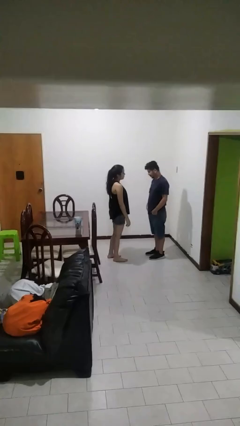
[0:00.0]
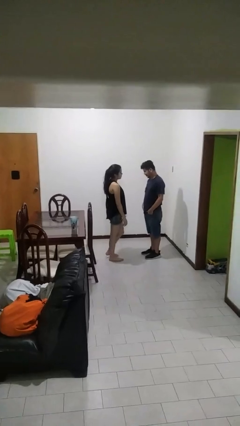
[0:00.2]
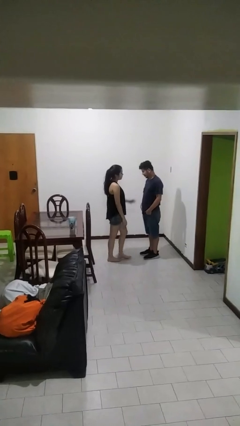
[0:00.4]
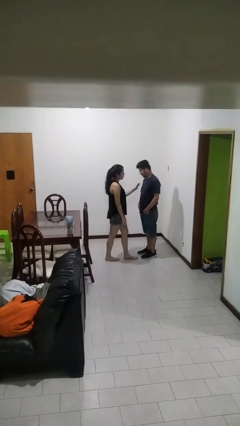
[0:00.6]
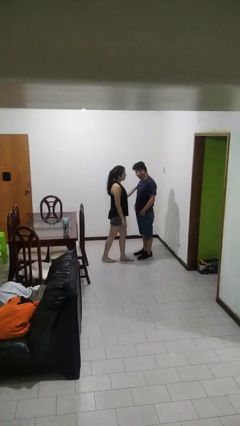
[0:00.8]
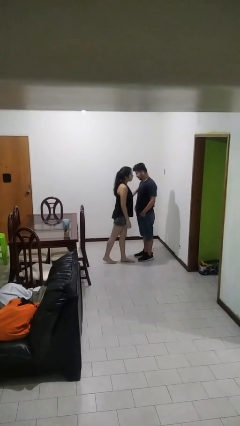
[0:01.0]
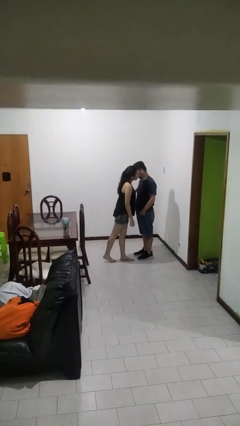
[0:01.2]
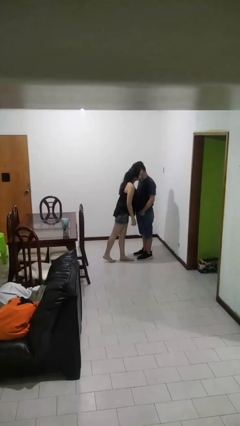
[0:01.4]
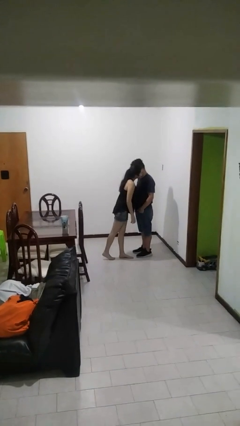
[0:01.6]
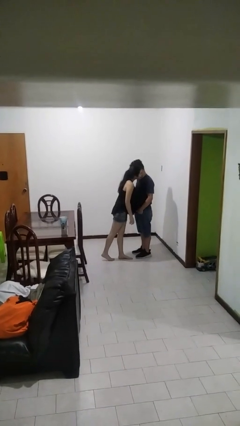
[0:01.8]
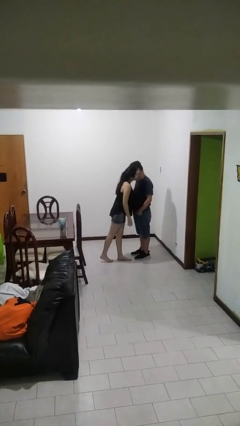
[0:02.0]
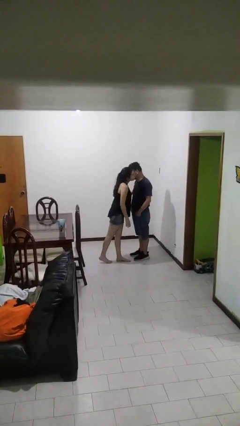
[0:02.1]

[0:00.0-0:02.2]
person kisses cheek of person

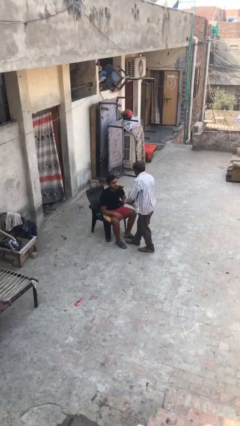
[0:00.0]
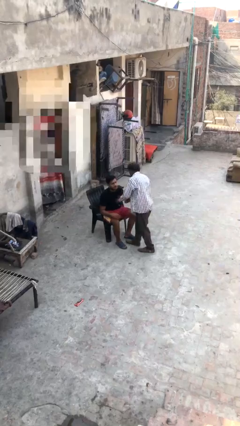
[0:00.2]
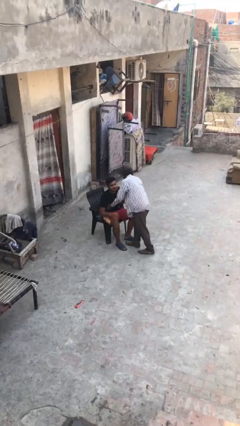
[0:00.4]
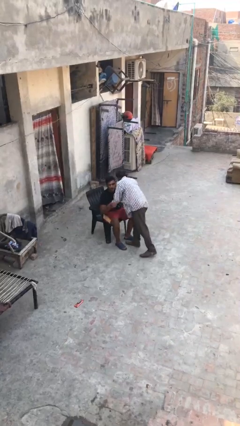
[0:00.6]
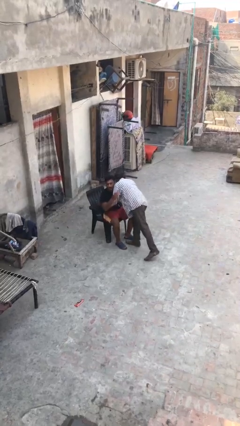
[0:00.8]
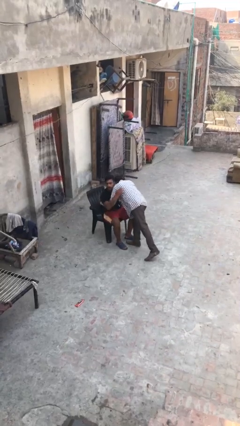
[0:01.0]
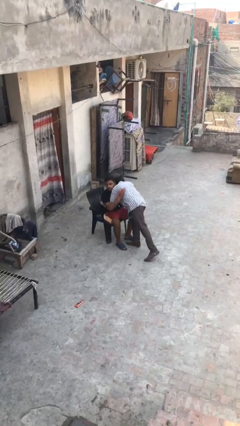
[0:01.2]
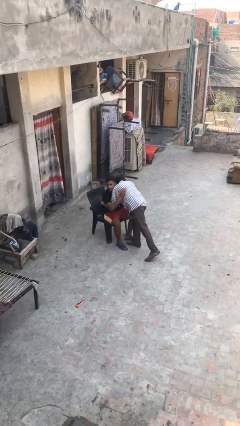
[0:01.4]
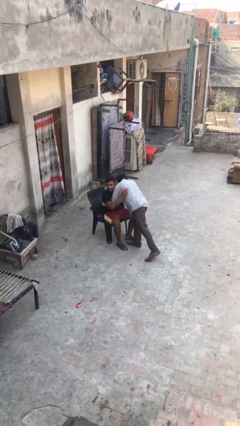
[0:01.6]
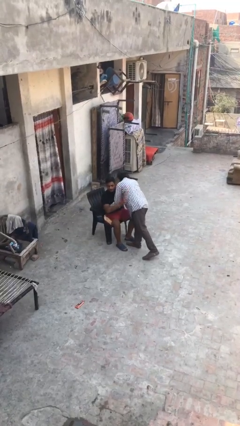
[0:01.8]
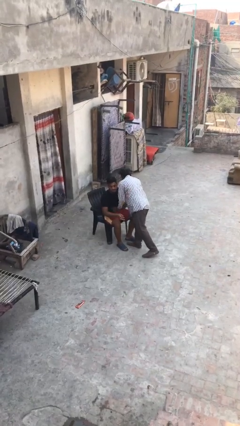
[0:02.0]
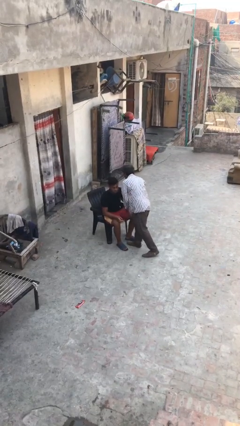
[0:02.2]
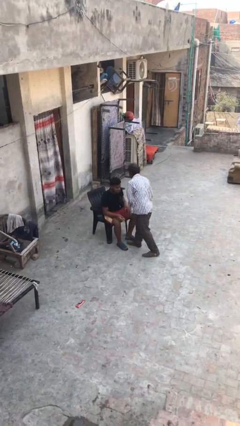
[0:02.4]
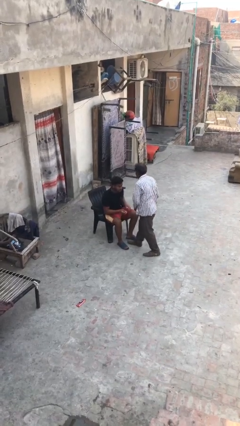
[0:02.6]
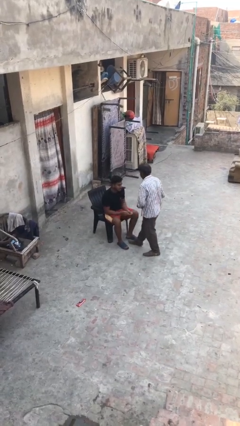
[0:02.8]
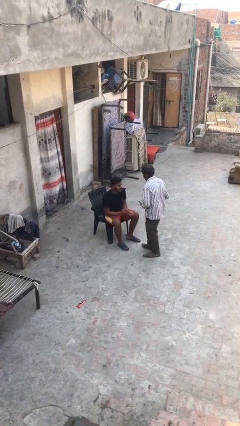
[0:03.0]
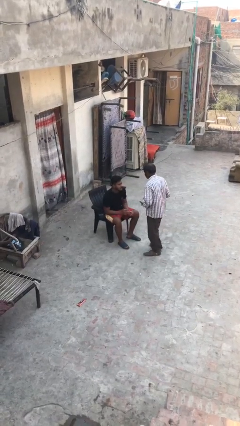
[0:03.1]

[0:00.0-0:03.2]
person embraces person

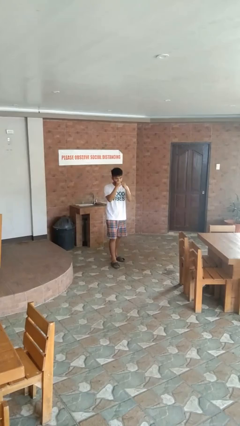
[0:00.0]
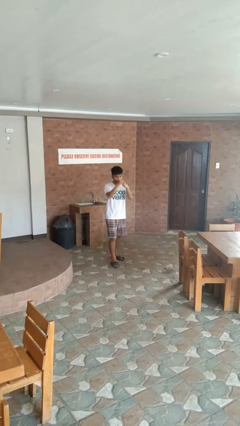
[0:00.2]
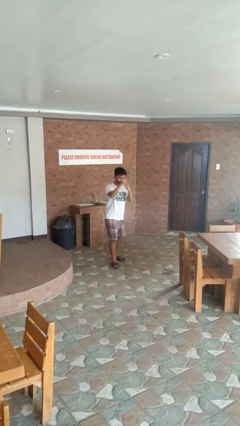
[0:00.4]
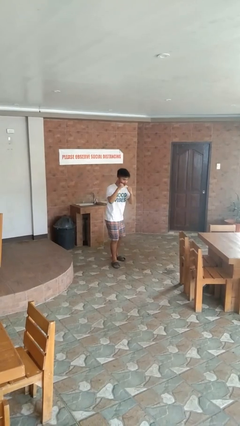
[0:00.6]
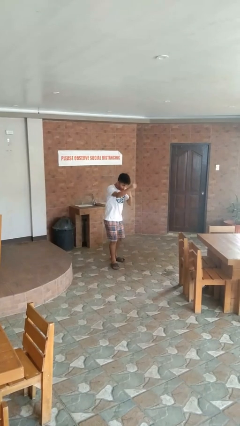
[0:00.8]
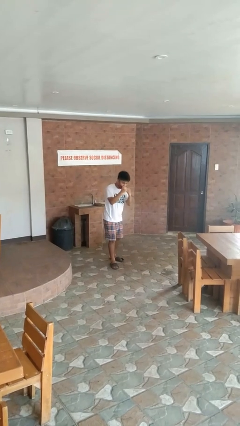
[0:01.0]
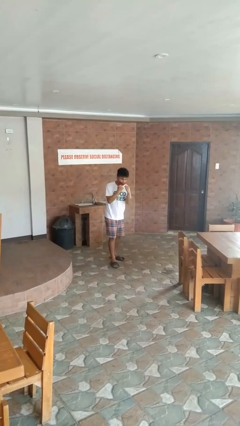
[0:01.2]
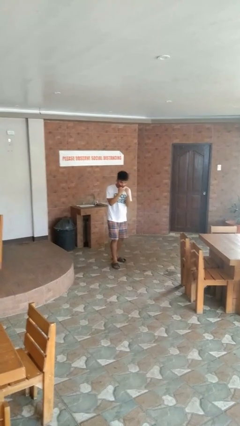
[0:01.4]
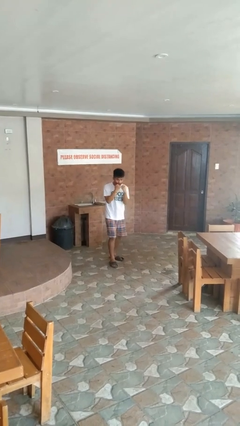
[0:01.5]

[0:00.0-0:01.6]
person punches

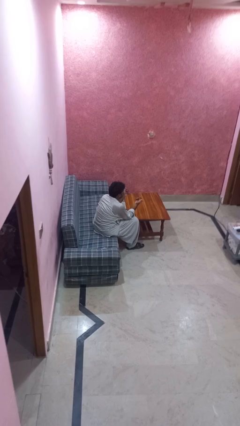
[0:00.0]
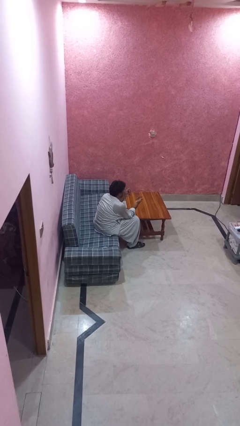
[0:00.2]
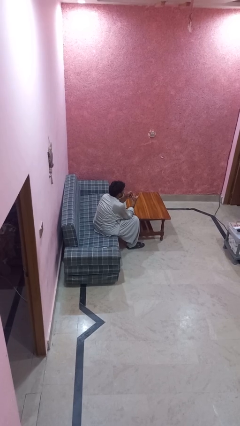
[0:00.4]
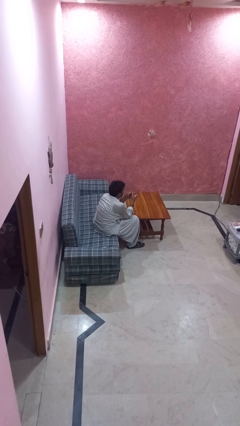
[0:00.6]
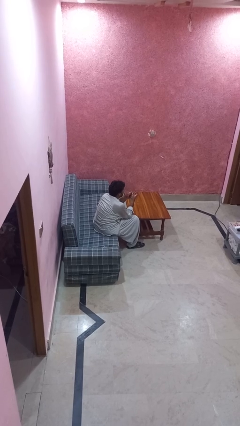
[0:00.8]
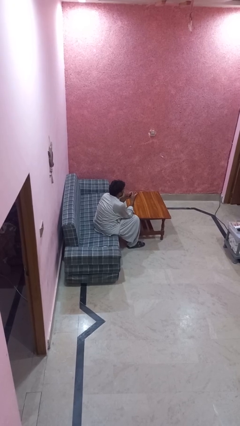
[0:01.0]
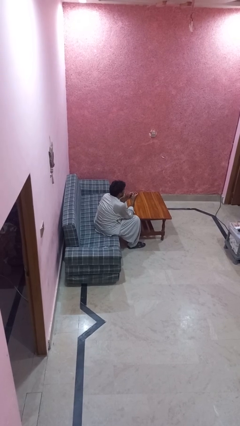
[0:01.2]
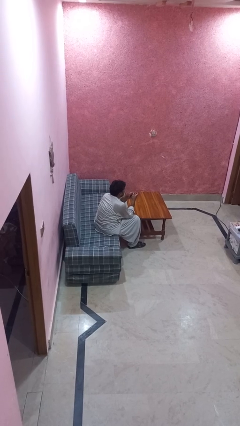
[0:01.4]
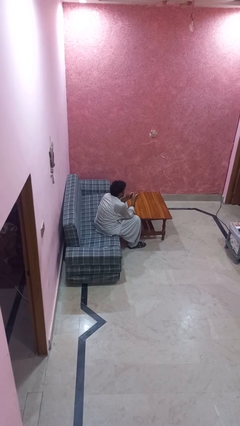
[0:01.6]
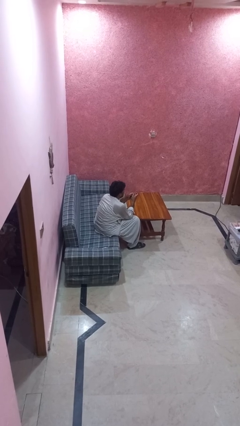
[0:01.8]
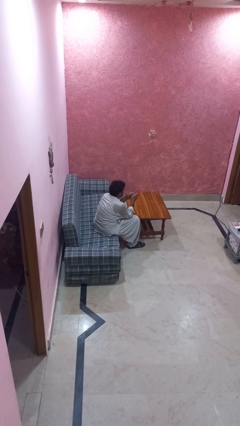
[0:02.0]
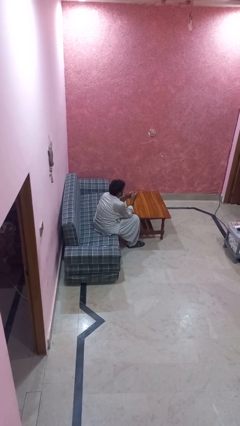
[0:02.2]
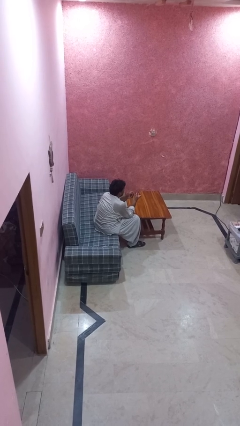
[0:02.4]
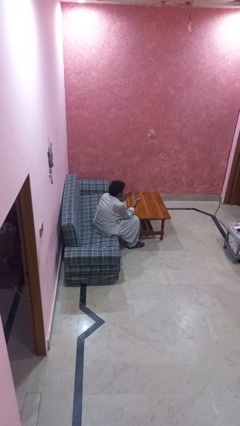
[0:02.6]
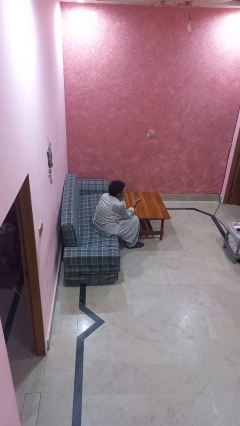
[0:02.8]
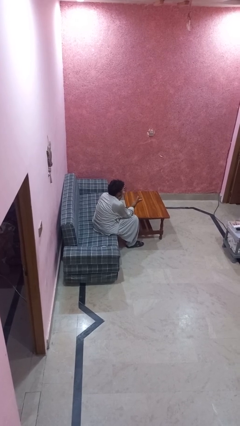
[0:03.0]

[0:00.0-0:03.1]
person files fingernails

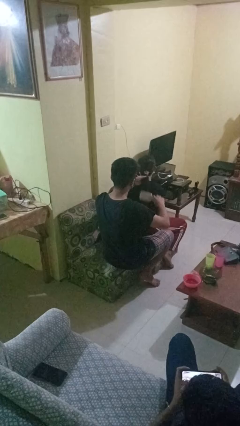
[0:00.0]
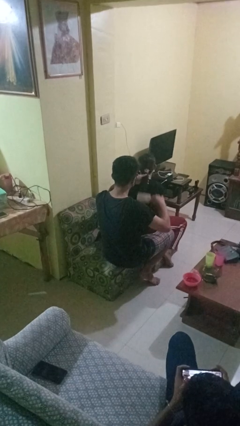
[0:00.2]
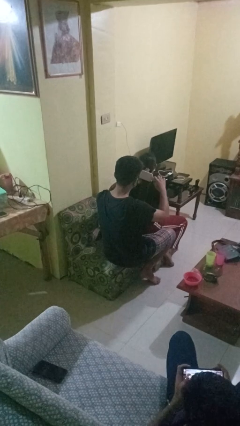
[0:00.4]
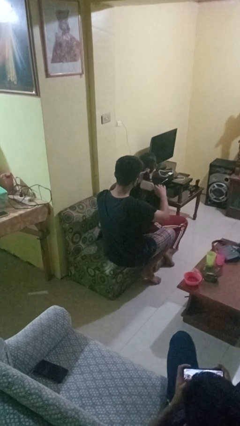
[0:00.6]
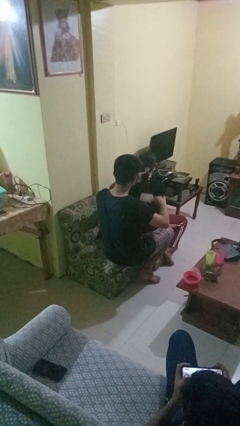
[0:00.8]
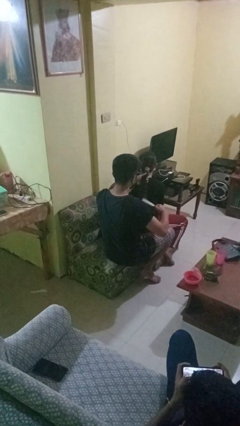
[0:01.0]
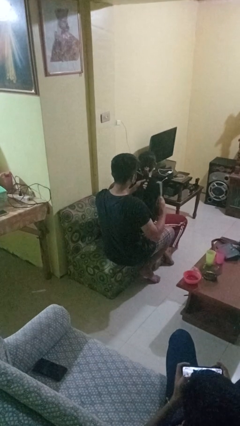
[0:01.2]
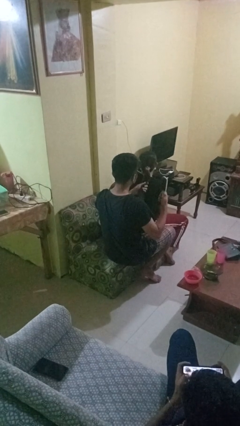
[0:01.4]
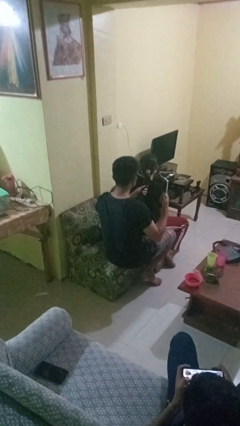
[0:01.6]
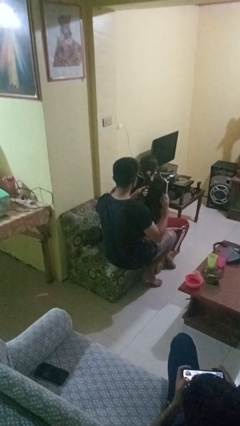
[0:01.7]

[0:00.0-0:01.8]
person brushes hair of person

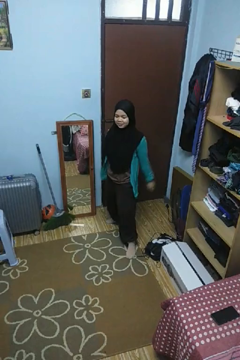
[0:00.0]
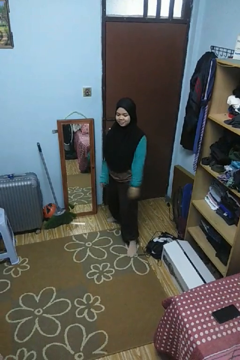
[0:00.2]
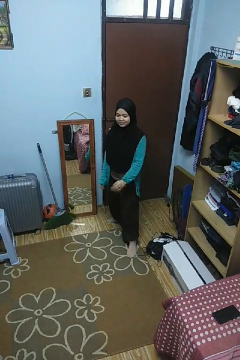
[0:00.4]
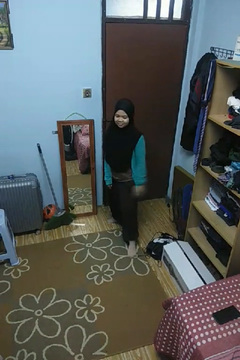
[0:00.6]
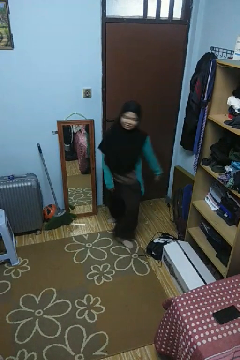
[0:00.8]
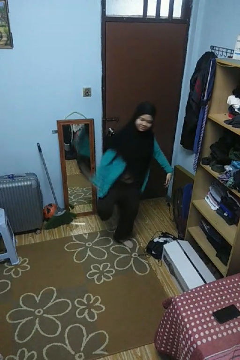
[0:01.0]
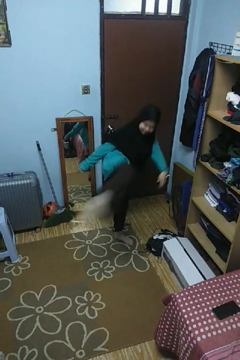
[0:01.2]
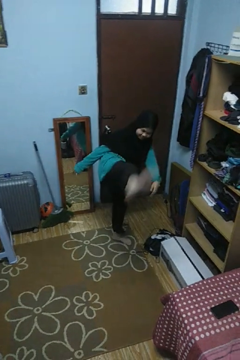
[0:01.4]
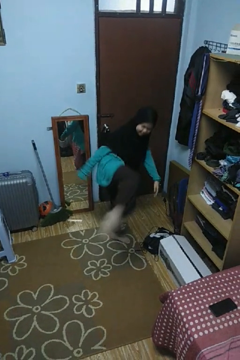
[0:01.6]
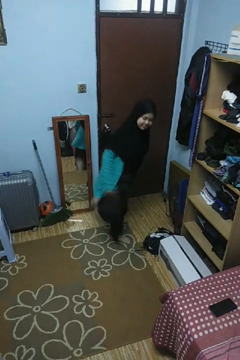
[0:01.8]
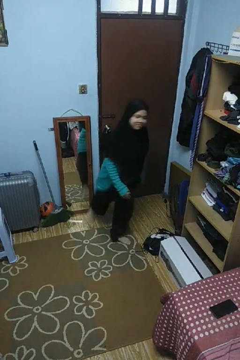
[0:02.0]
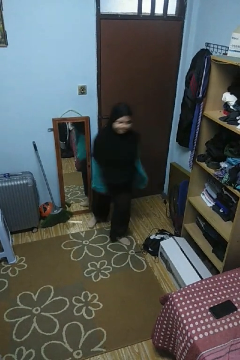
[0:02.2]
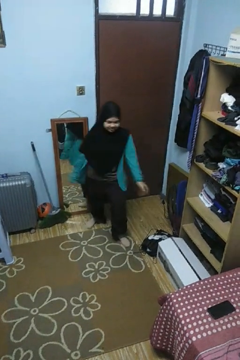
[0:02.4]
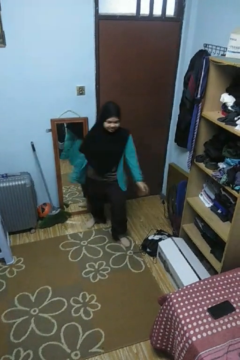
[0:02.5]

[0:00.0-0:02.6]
person karate kicks

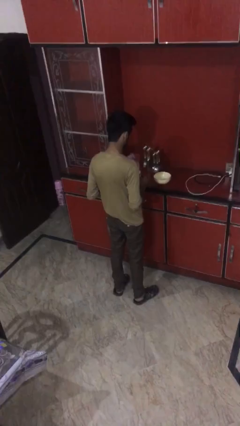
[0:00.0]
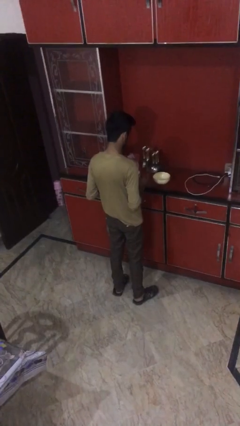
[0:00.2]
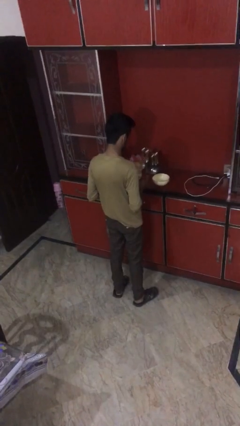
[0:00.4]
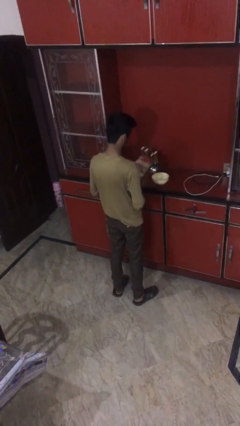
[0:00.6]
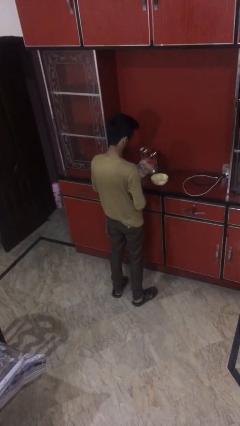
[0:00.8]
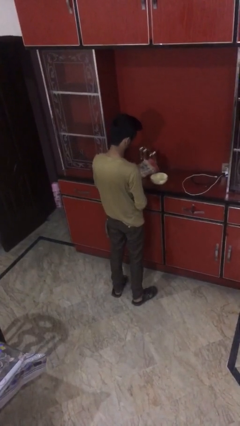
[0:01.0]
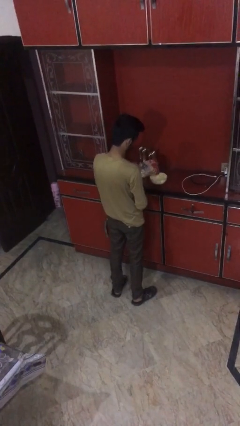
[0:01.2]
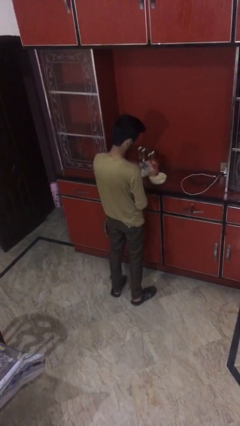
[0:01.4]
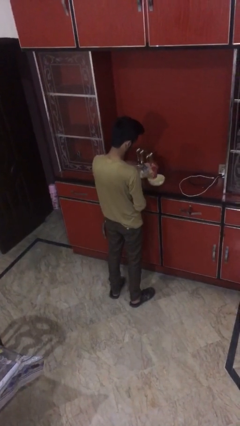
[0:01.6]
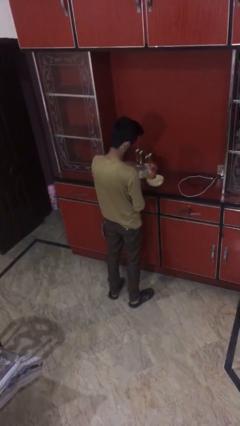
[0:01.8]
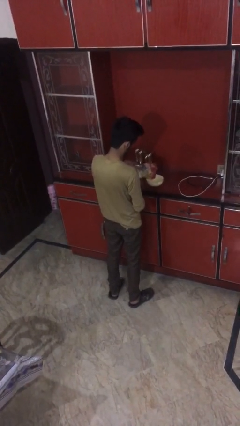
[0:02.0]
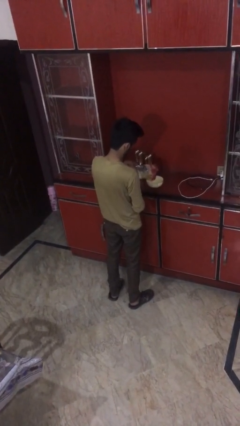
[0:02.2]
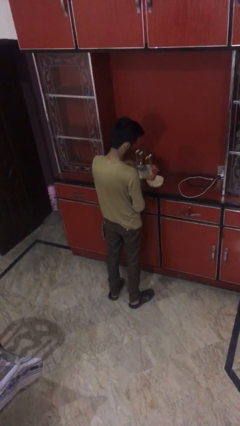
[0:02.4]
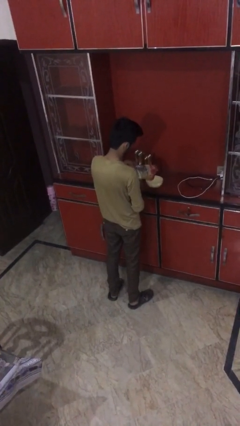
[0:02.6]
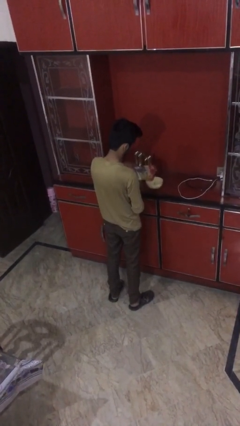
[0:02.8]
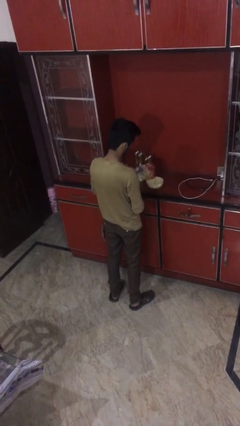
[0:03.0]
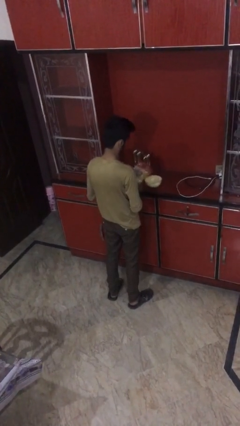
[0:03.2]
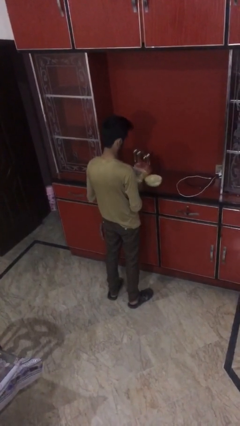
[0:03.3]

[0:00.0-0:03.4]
person pours into bowl
